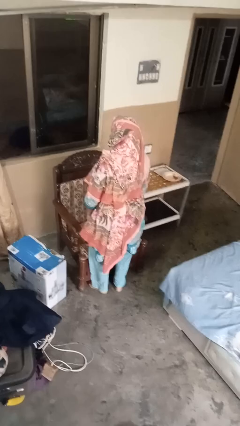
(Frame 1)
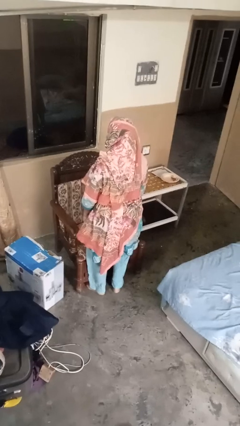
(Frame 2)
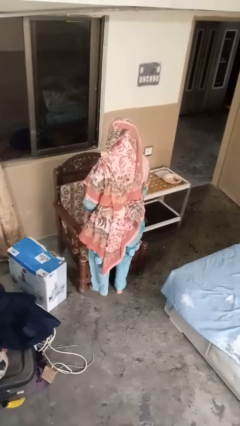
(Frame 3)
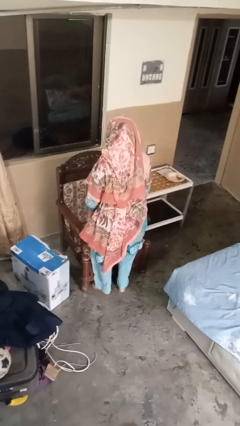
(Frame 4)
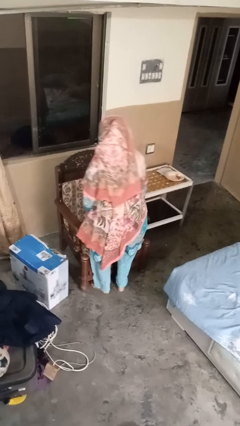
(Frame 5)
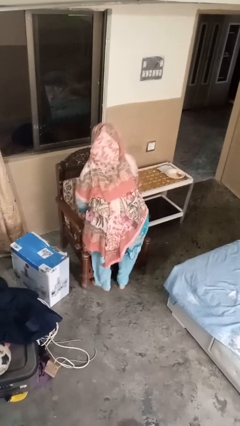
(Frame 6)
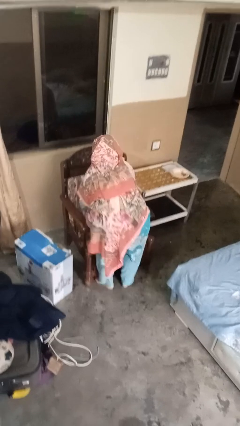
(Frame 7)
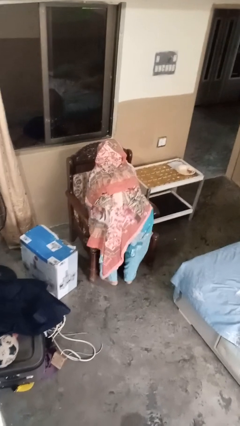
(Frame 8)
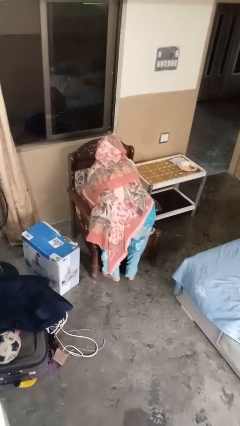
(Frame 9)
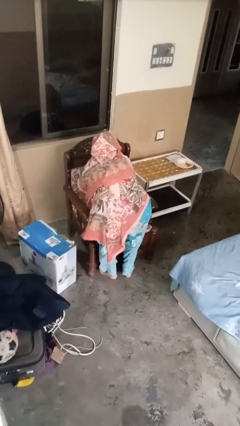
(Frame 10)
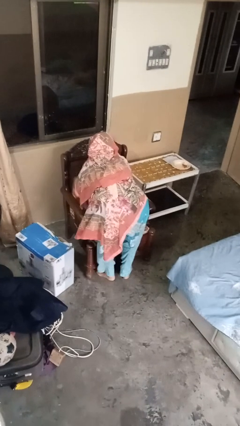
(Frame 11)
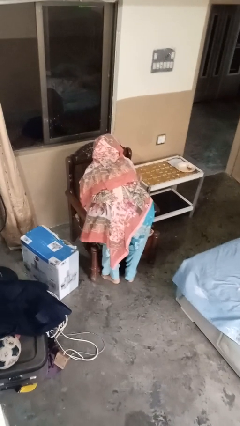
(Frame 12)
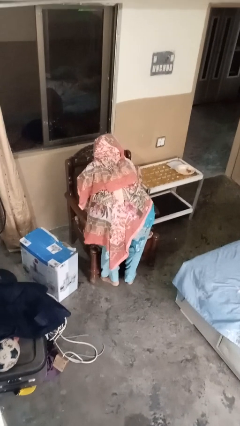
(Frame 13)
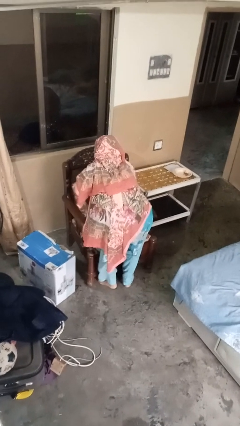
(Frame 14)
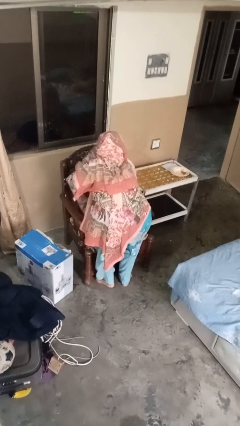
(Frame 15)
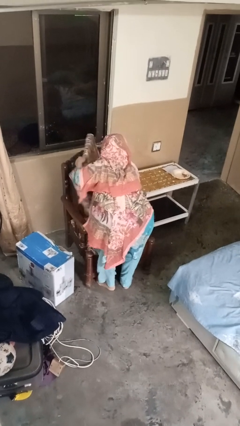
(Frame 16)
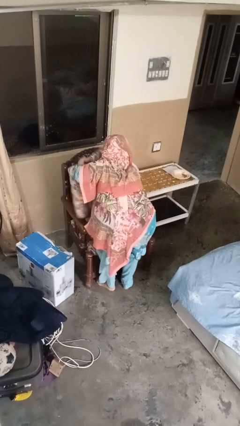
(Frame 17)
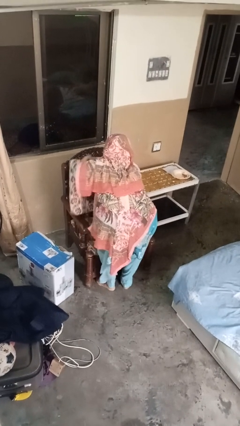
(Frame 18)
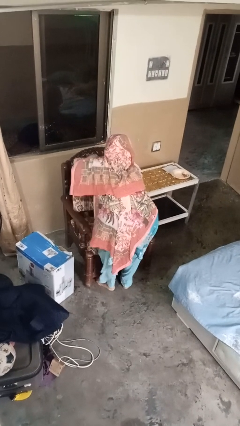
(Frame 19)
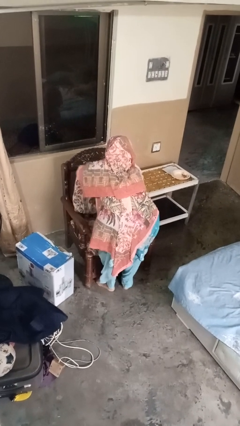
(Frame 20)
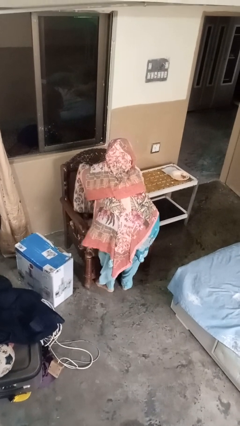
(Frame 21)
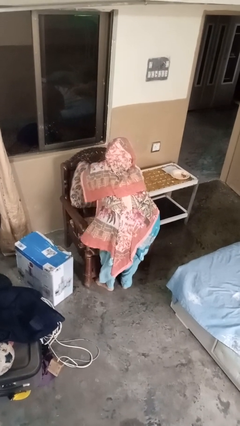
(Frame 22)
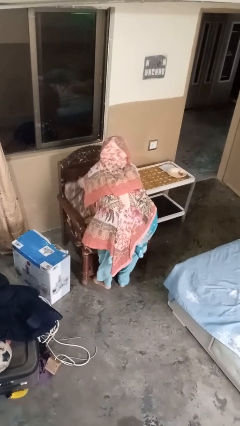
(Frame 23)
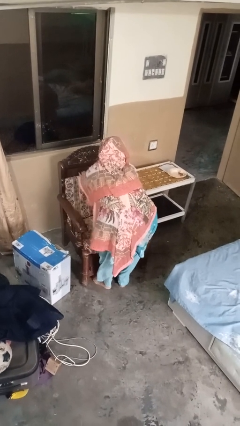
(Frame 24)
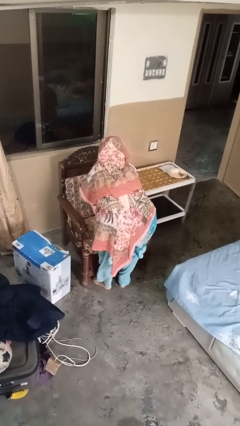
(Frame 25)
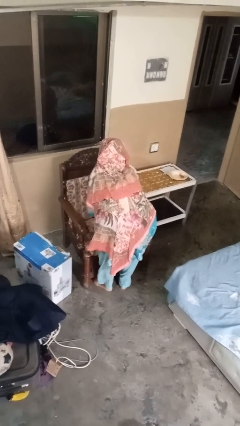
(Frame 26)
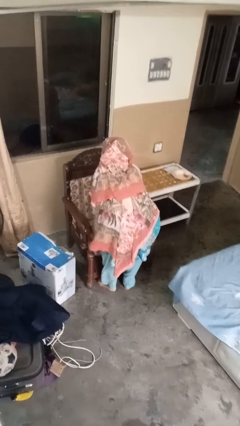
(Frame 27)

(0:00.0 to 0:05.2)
person searches in couch

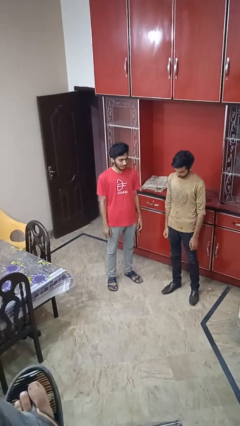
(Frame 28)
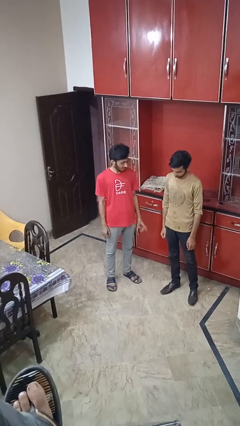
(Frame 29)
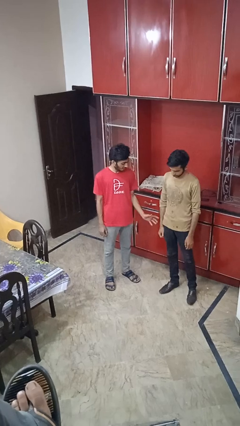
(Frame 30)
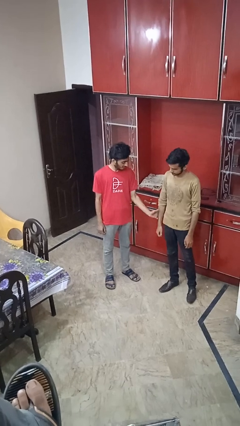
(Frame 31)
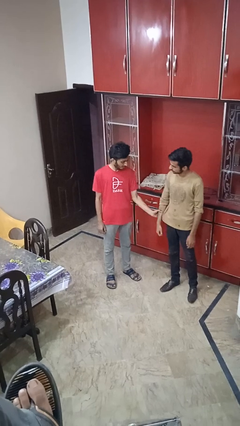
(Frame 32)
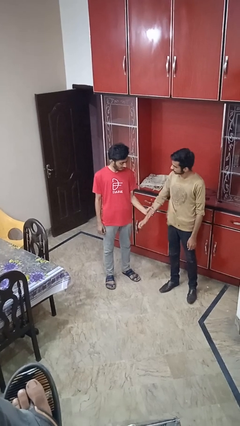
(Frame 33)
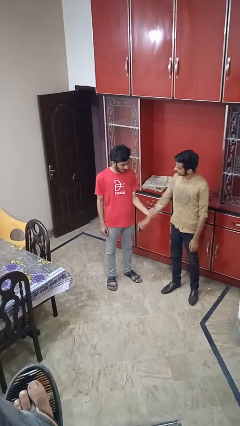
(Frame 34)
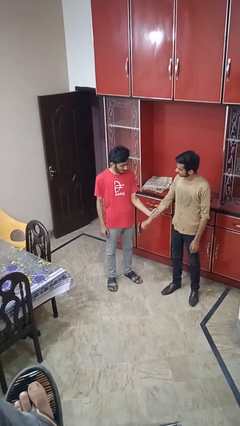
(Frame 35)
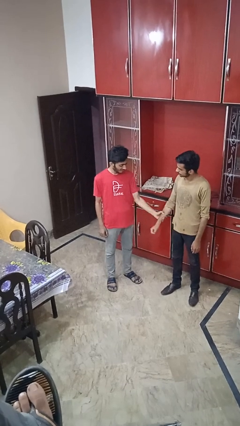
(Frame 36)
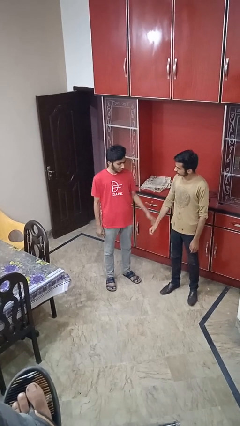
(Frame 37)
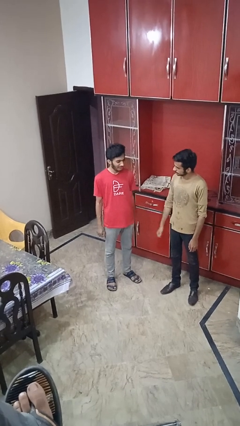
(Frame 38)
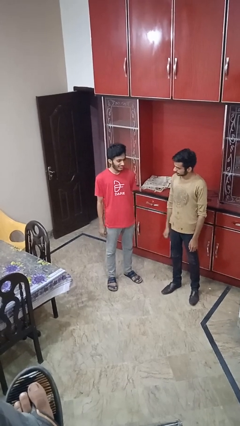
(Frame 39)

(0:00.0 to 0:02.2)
person grabs person by forearm

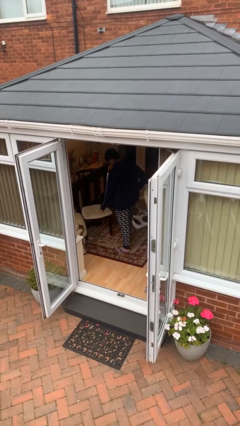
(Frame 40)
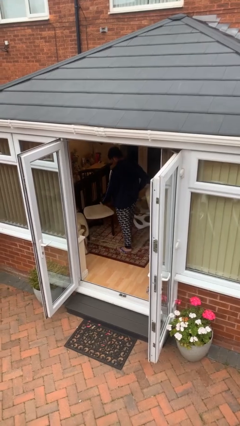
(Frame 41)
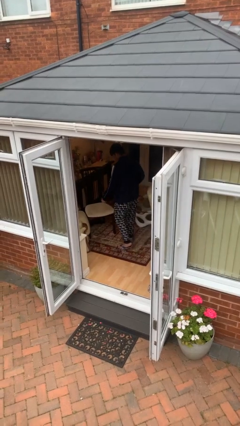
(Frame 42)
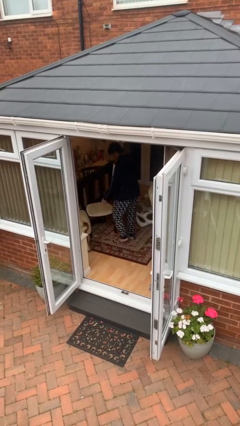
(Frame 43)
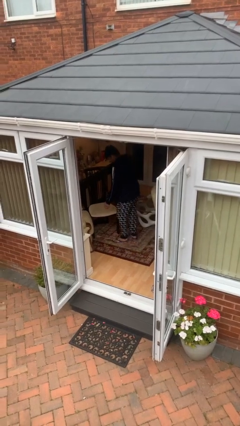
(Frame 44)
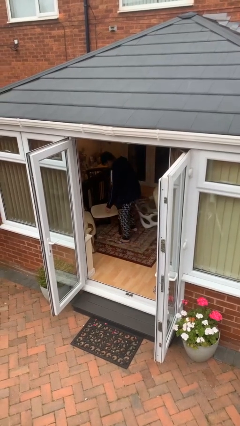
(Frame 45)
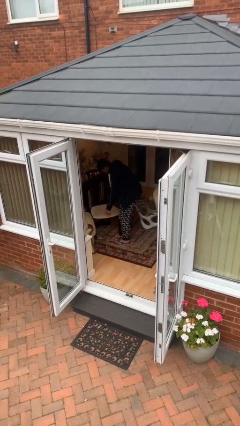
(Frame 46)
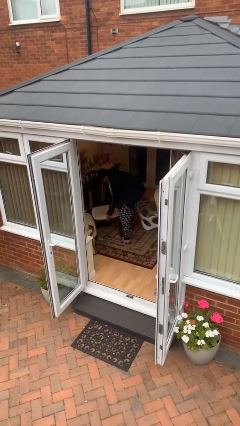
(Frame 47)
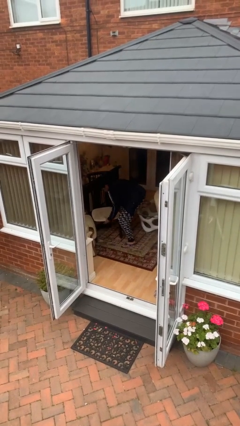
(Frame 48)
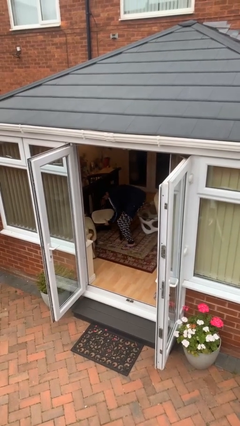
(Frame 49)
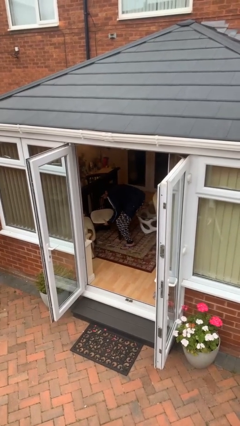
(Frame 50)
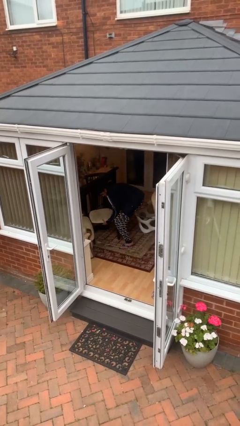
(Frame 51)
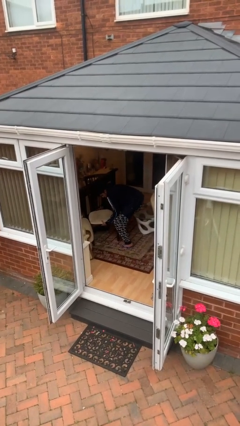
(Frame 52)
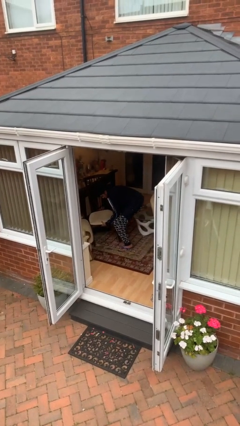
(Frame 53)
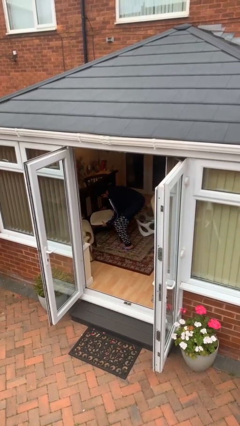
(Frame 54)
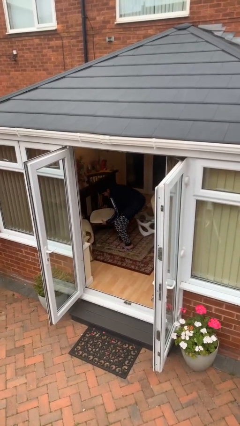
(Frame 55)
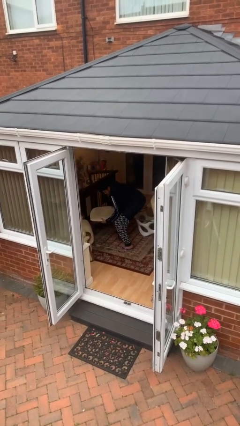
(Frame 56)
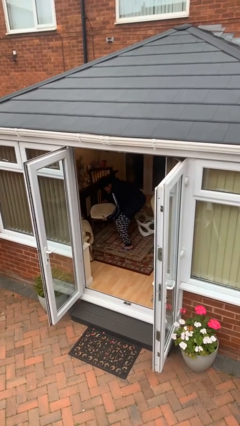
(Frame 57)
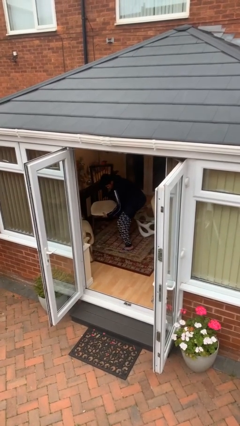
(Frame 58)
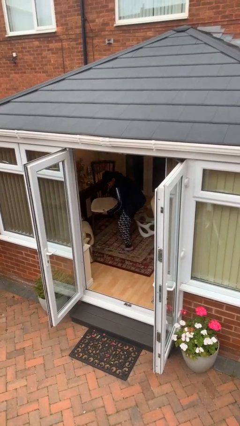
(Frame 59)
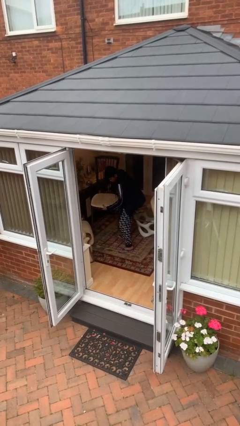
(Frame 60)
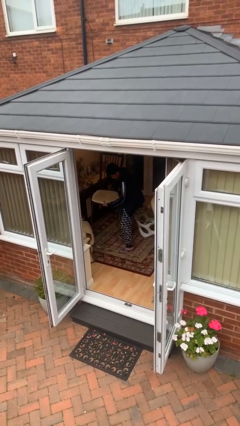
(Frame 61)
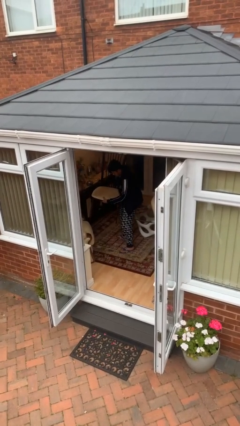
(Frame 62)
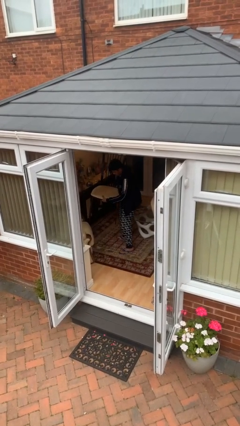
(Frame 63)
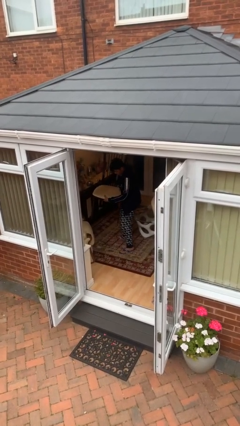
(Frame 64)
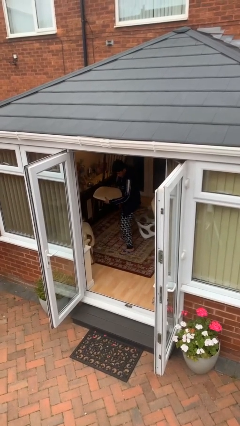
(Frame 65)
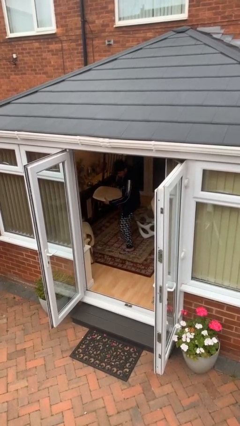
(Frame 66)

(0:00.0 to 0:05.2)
person picks up object from floor

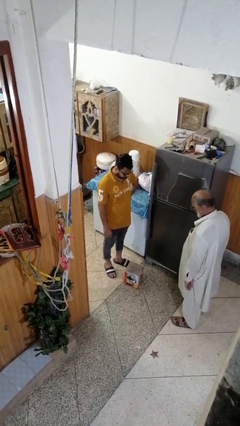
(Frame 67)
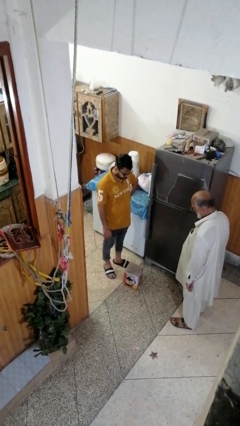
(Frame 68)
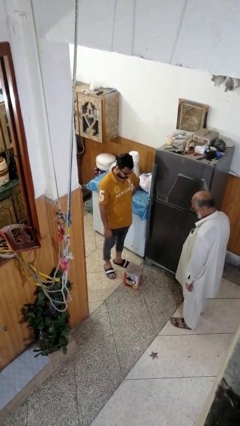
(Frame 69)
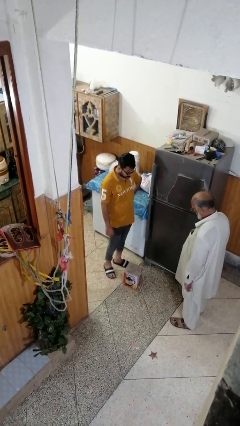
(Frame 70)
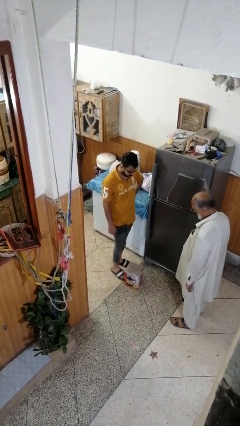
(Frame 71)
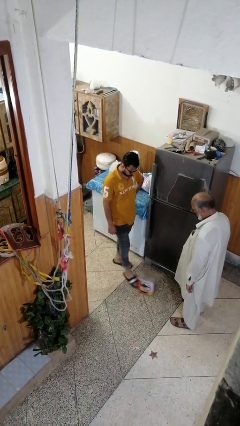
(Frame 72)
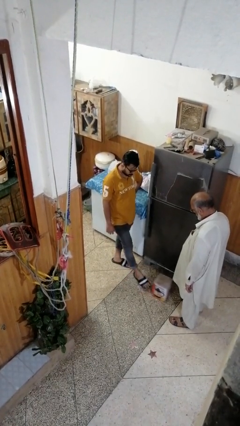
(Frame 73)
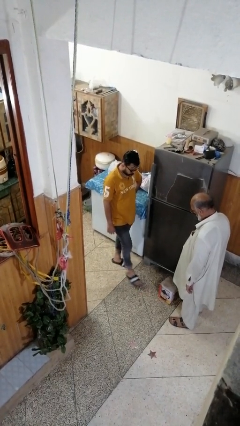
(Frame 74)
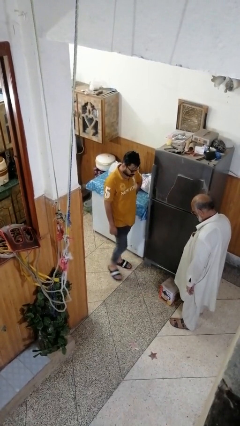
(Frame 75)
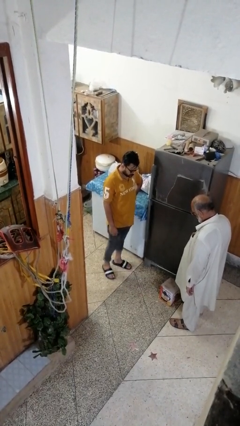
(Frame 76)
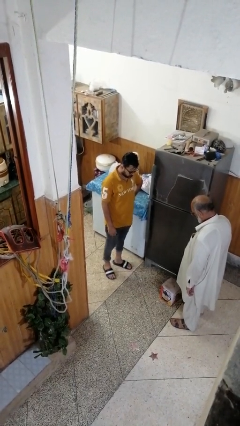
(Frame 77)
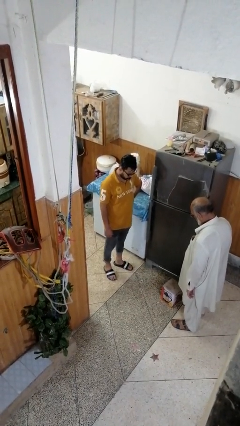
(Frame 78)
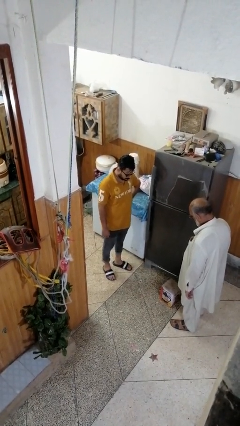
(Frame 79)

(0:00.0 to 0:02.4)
person kicks object to person

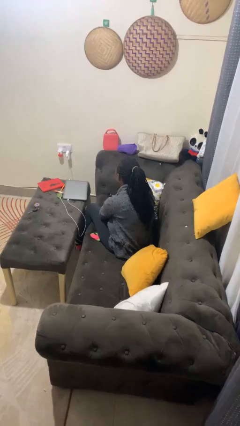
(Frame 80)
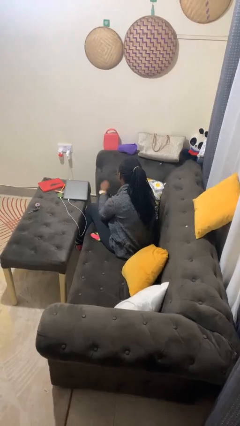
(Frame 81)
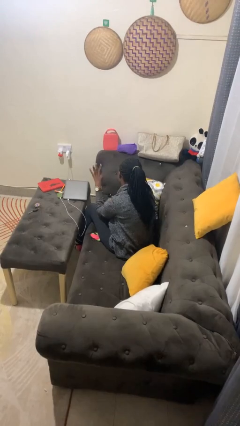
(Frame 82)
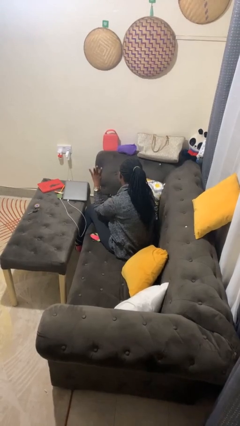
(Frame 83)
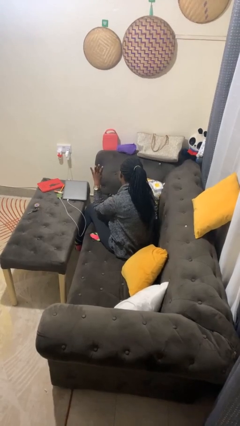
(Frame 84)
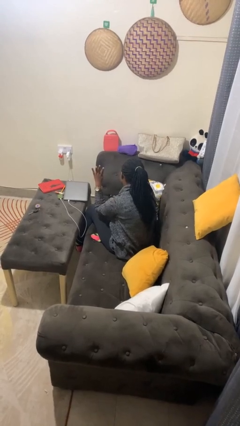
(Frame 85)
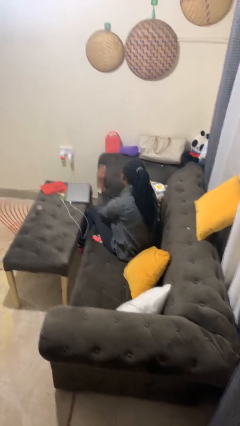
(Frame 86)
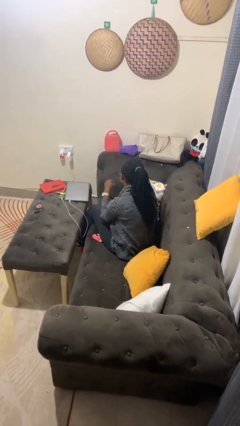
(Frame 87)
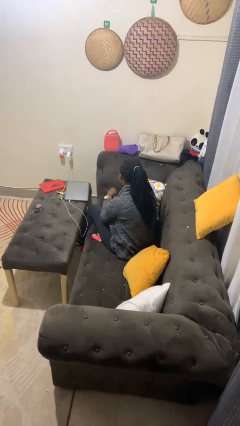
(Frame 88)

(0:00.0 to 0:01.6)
person gestures number four

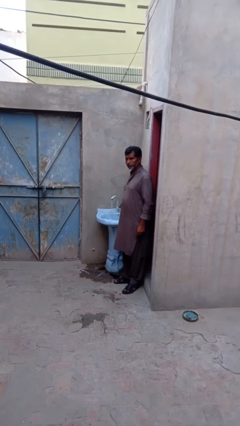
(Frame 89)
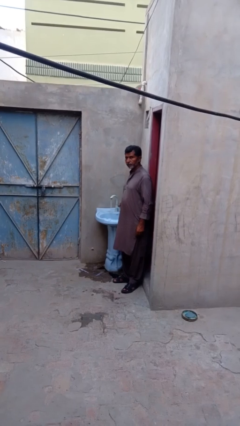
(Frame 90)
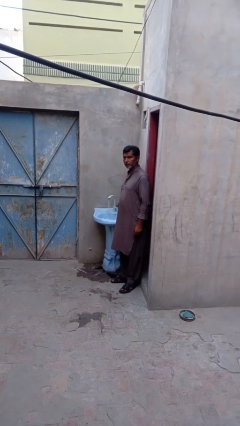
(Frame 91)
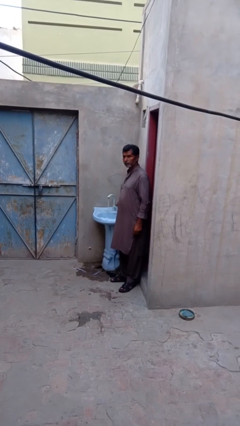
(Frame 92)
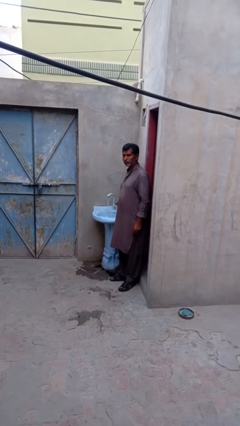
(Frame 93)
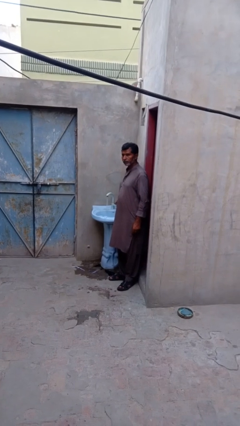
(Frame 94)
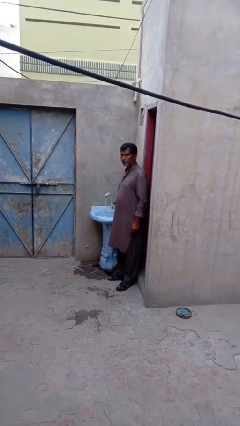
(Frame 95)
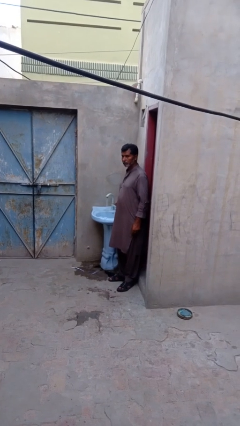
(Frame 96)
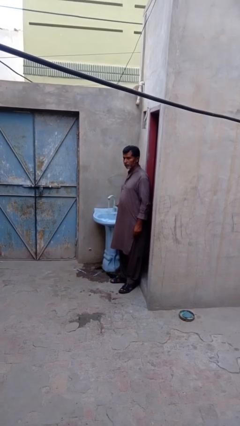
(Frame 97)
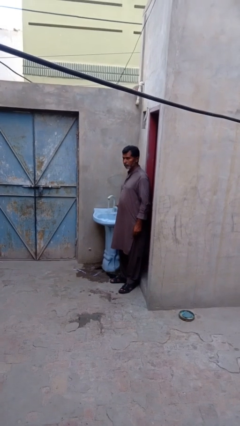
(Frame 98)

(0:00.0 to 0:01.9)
person turns on faucet
